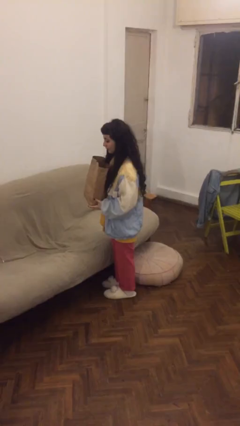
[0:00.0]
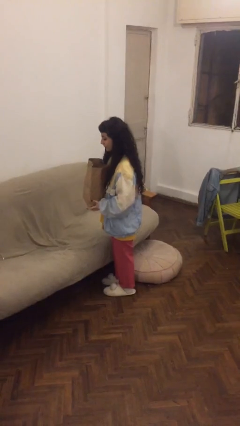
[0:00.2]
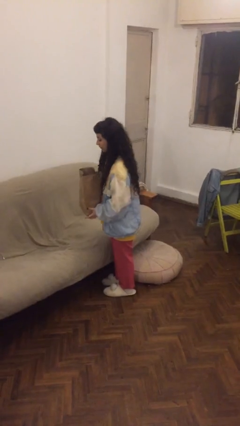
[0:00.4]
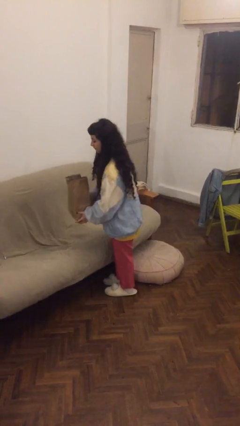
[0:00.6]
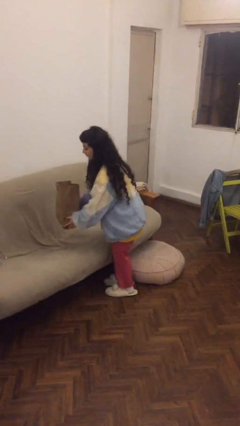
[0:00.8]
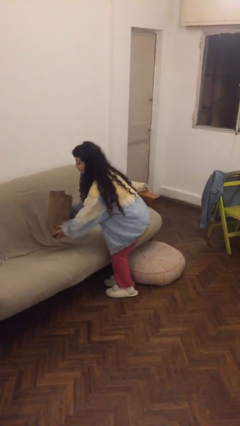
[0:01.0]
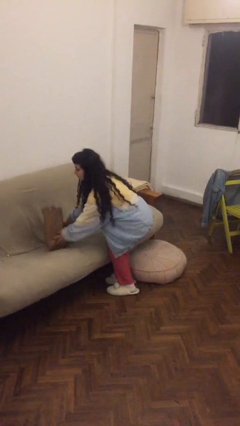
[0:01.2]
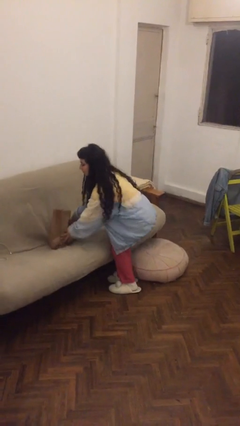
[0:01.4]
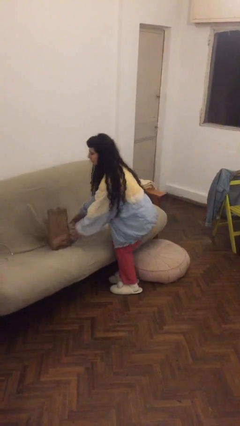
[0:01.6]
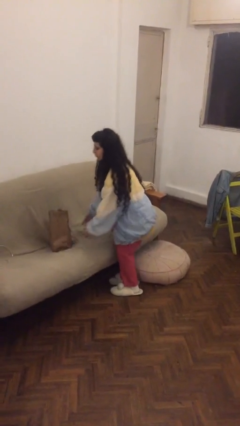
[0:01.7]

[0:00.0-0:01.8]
person puts down object on couch

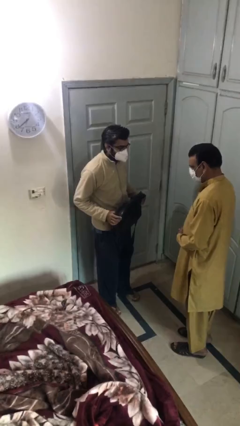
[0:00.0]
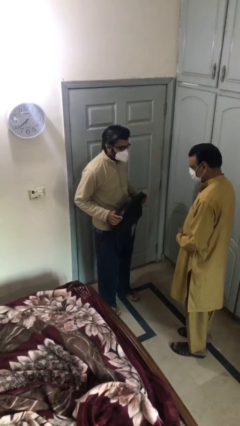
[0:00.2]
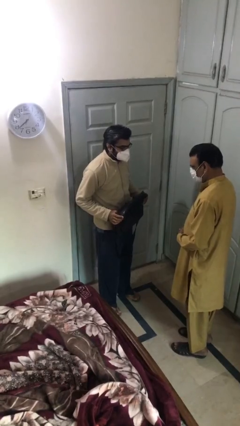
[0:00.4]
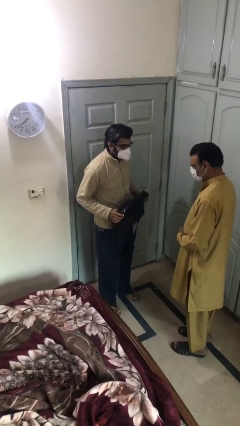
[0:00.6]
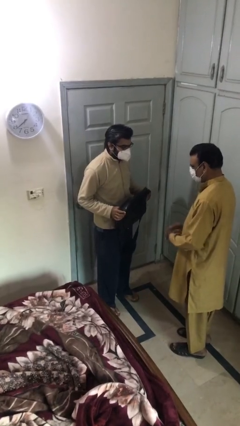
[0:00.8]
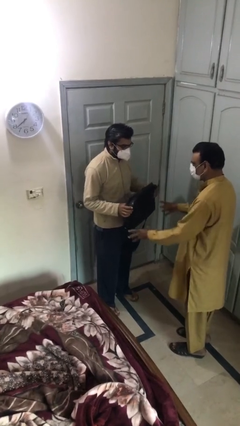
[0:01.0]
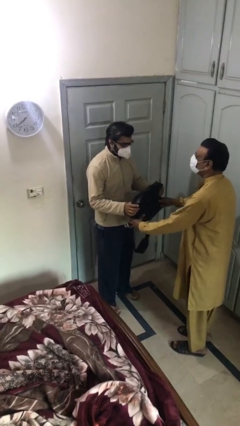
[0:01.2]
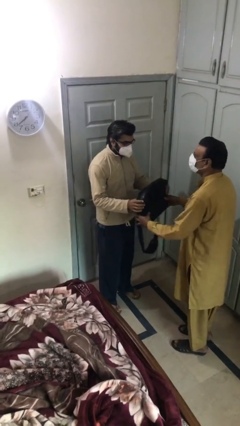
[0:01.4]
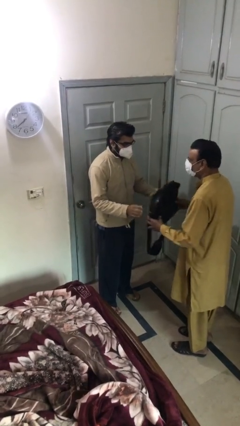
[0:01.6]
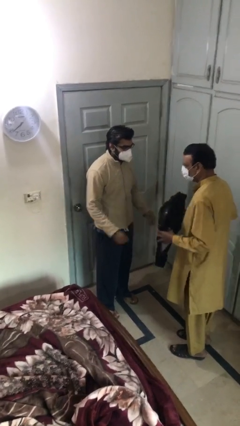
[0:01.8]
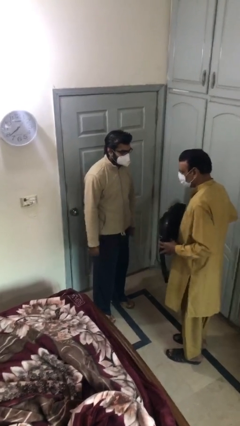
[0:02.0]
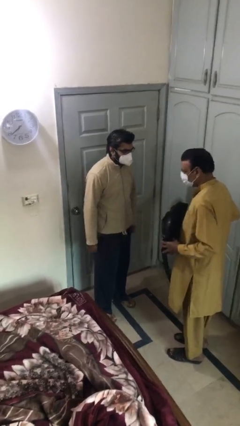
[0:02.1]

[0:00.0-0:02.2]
person transfers object to person

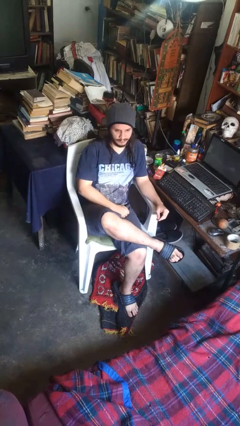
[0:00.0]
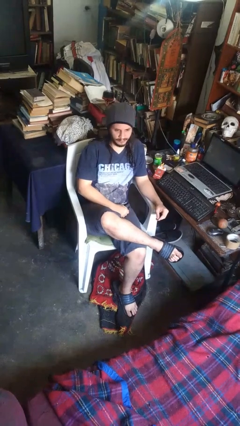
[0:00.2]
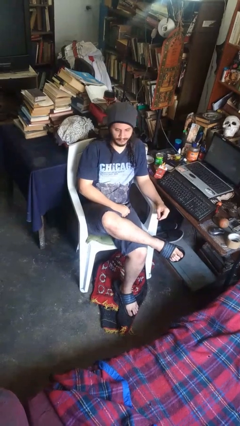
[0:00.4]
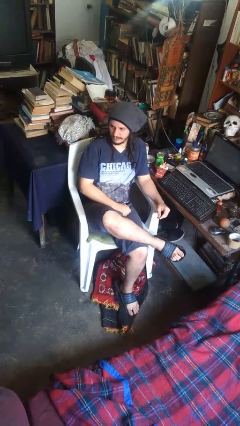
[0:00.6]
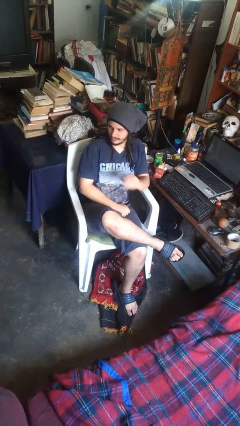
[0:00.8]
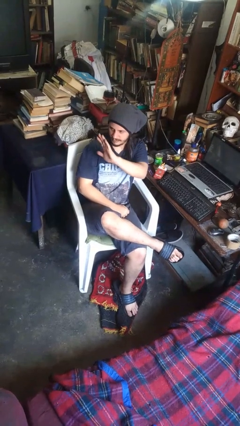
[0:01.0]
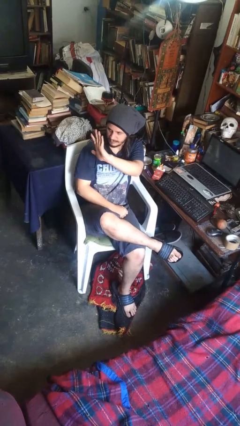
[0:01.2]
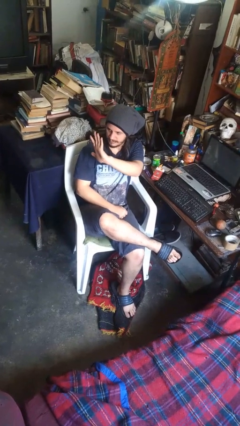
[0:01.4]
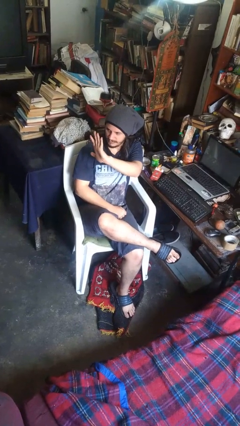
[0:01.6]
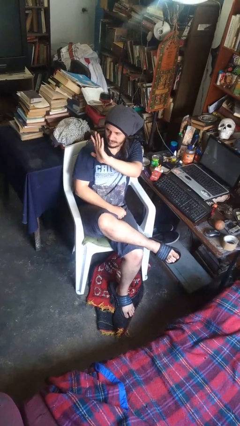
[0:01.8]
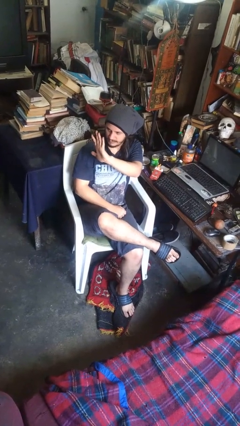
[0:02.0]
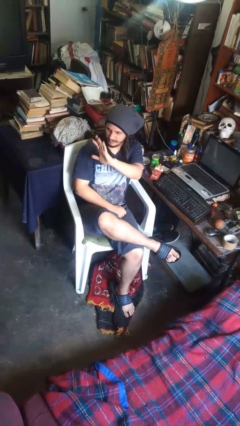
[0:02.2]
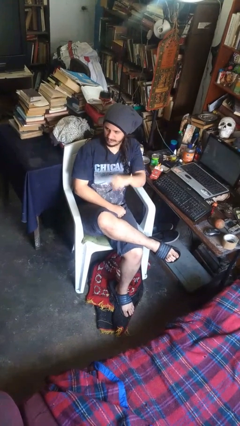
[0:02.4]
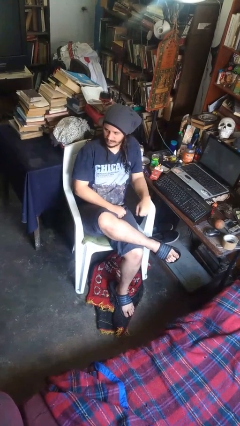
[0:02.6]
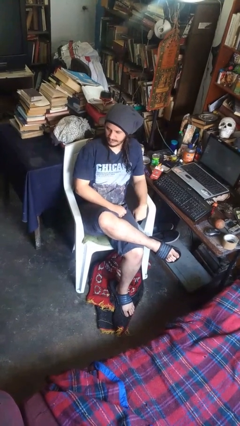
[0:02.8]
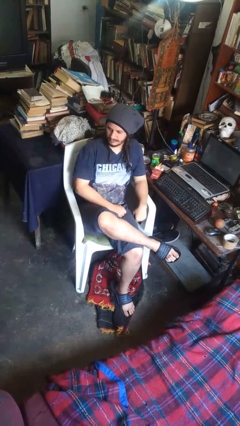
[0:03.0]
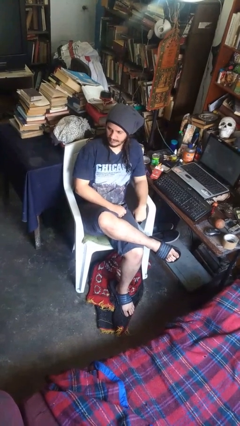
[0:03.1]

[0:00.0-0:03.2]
person gestures number five

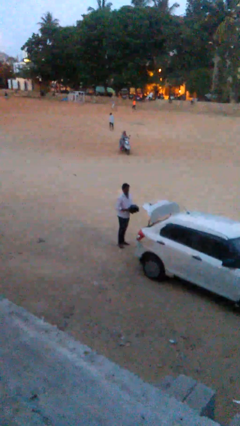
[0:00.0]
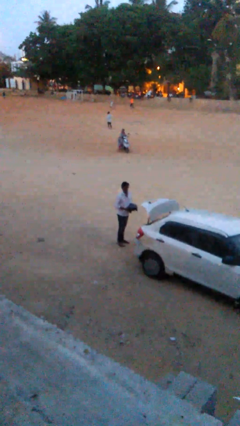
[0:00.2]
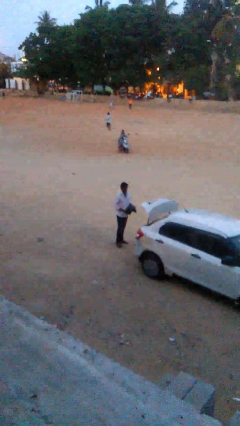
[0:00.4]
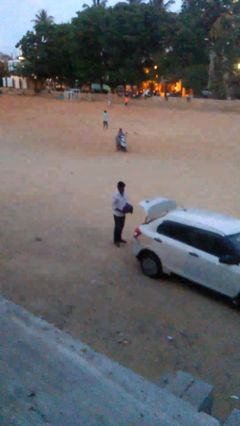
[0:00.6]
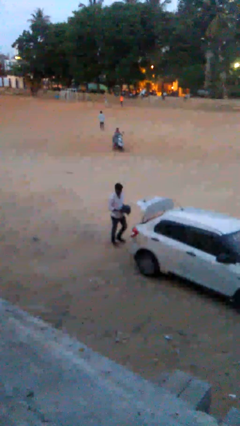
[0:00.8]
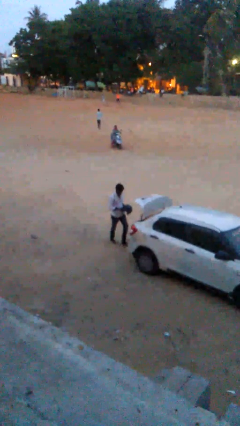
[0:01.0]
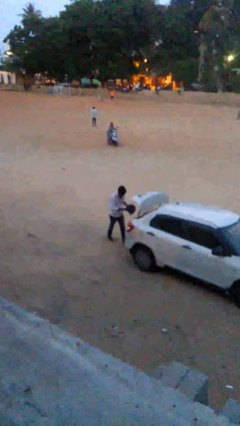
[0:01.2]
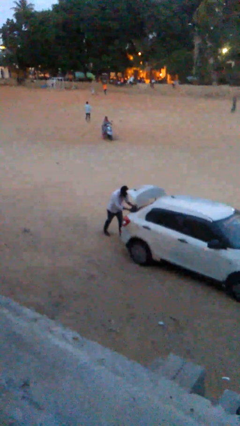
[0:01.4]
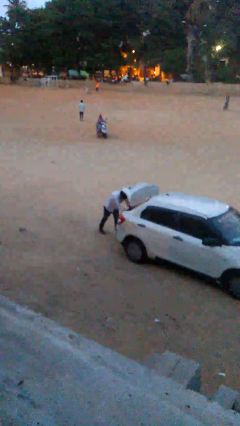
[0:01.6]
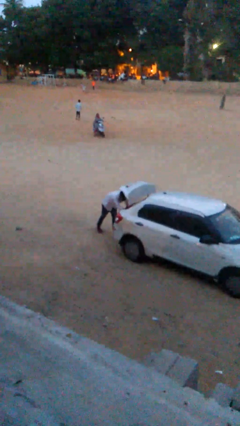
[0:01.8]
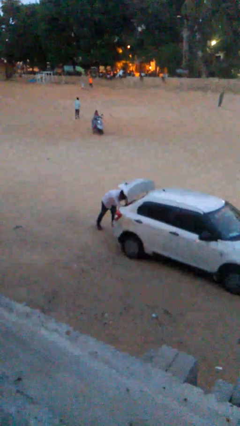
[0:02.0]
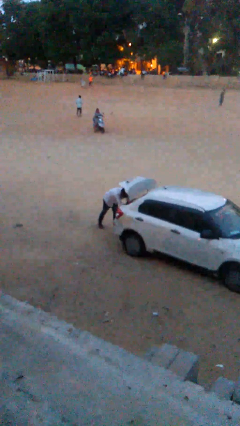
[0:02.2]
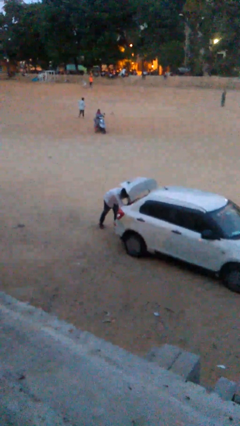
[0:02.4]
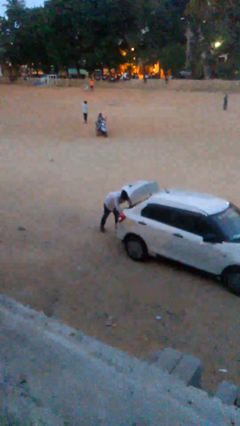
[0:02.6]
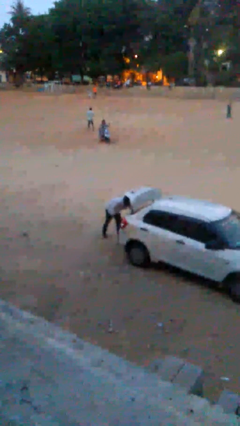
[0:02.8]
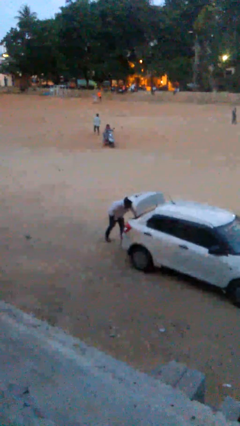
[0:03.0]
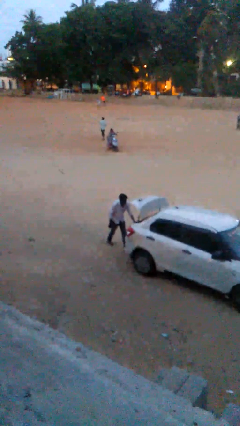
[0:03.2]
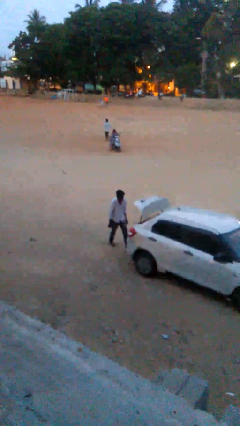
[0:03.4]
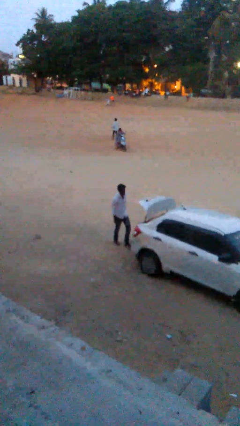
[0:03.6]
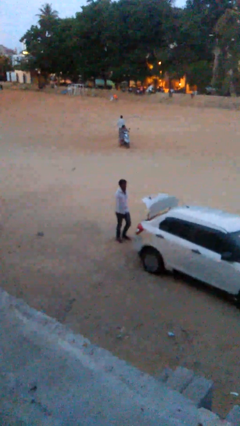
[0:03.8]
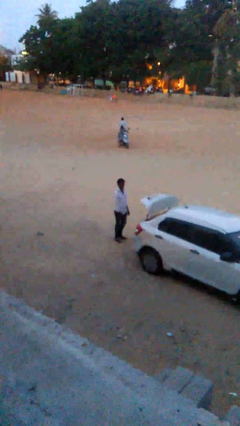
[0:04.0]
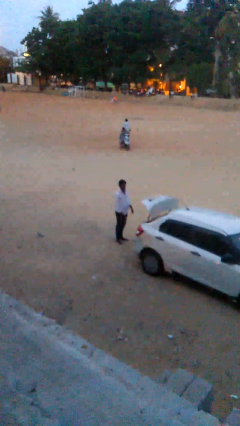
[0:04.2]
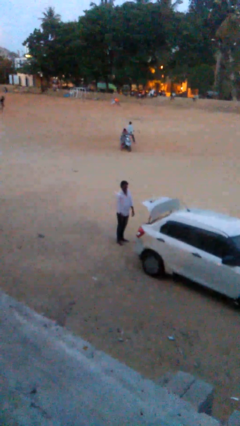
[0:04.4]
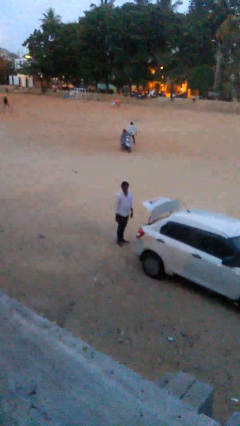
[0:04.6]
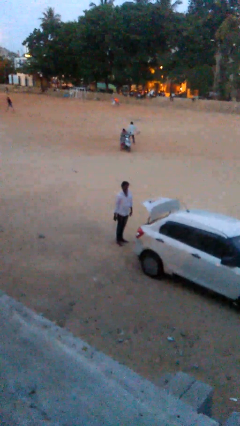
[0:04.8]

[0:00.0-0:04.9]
person loads car

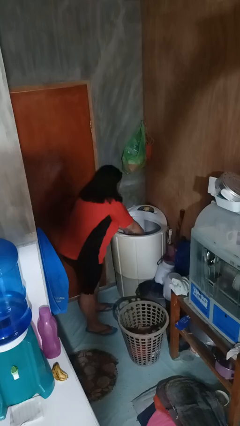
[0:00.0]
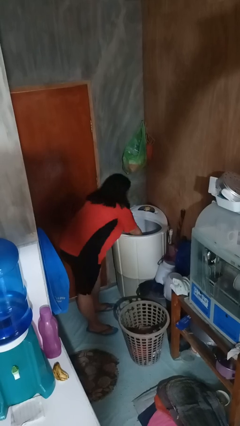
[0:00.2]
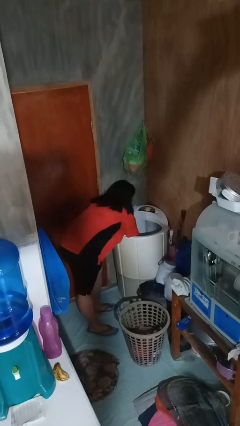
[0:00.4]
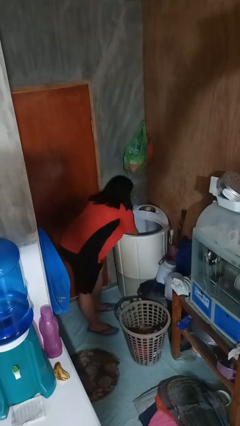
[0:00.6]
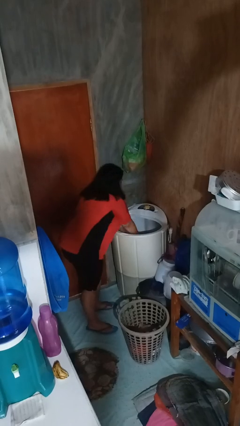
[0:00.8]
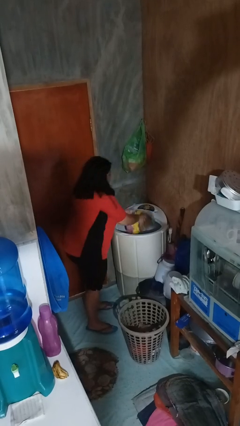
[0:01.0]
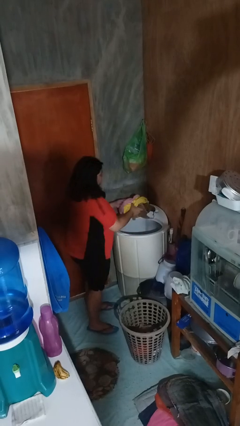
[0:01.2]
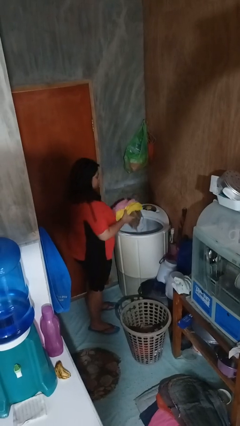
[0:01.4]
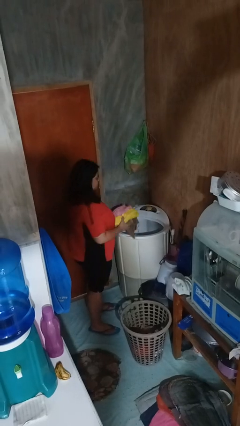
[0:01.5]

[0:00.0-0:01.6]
person loads clotheswasher

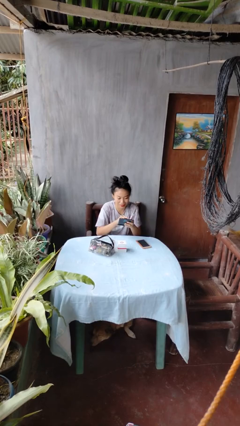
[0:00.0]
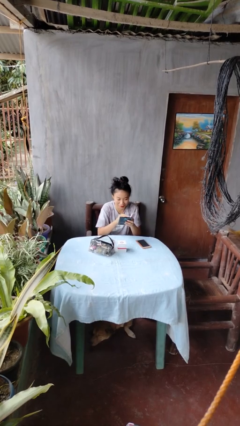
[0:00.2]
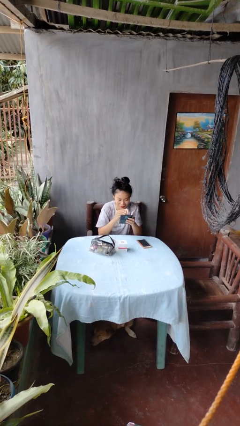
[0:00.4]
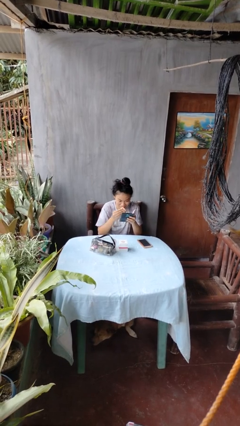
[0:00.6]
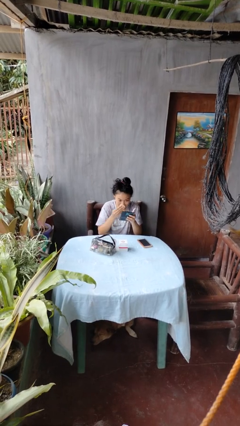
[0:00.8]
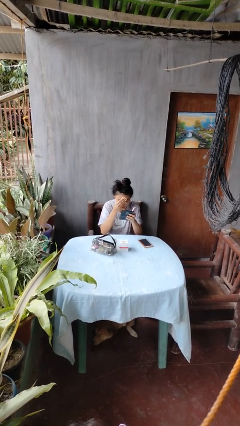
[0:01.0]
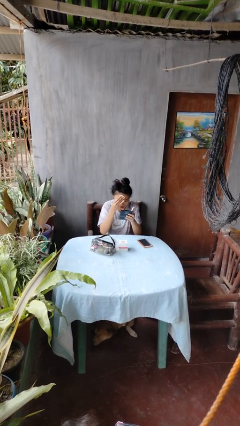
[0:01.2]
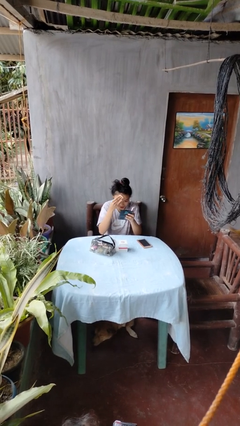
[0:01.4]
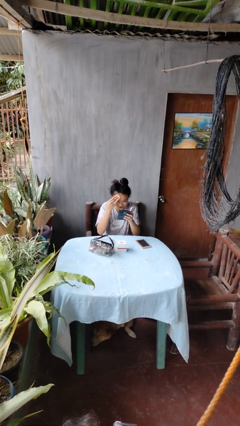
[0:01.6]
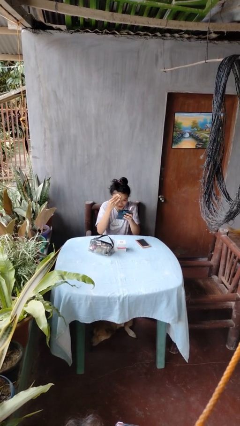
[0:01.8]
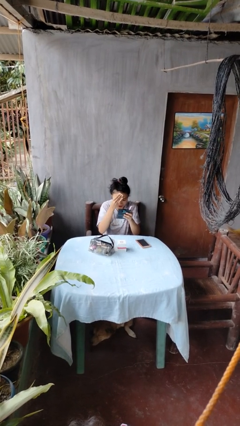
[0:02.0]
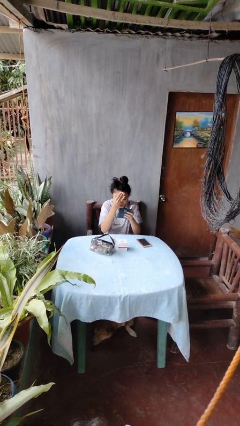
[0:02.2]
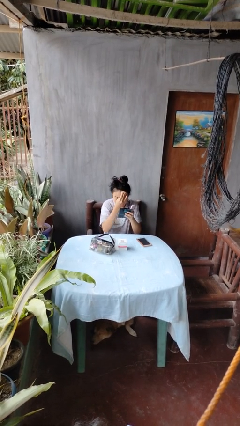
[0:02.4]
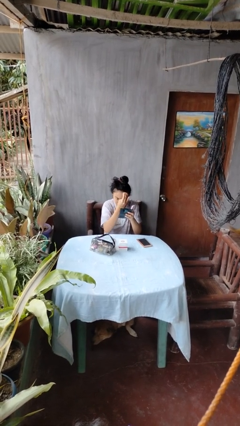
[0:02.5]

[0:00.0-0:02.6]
person applies foundation makeup

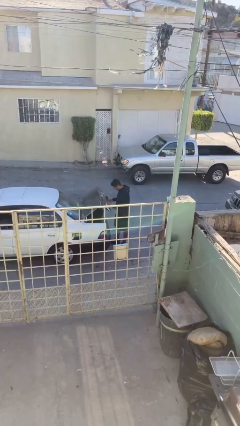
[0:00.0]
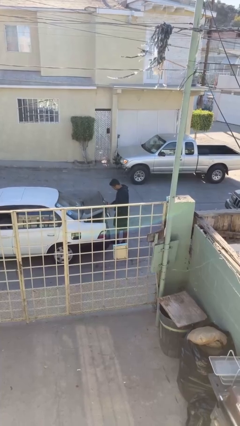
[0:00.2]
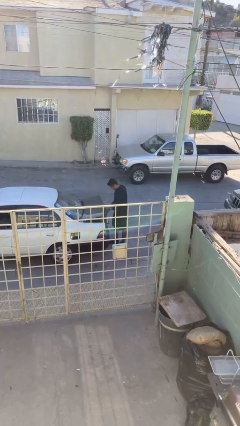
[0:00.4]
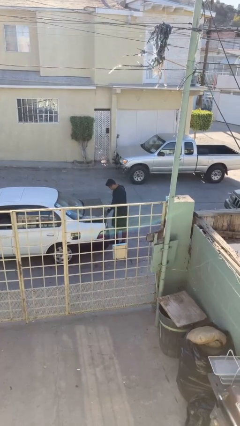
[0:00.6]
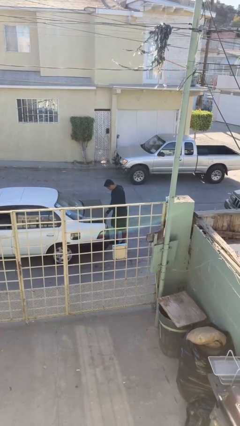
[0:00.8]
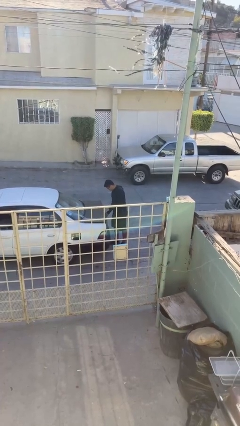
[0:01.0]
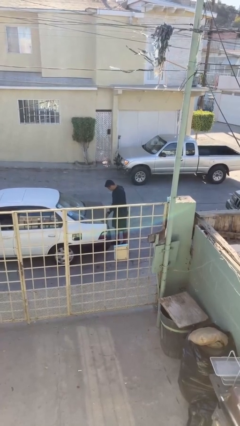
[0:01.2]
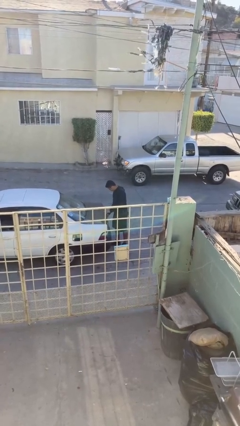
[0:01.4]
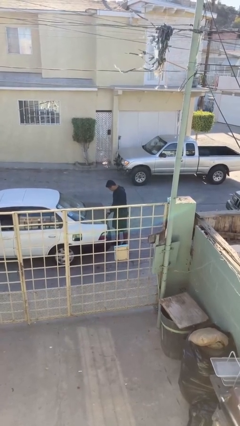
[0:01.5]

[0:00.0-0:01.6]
person closes car trunk
